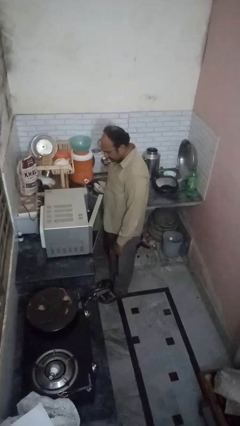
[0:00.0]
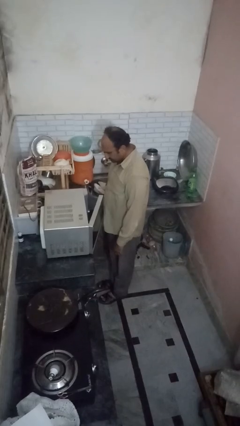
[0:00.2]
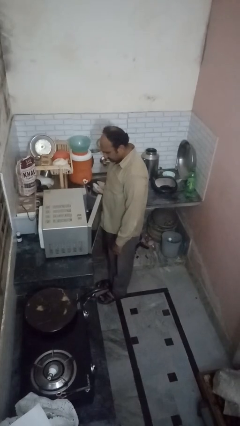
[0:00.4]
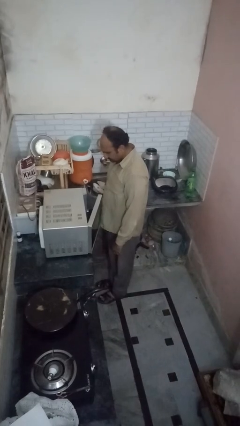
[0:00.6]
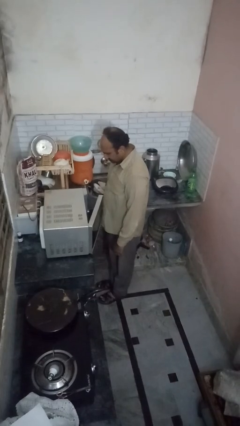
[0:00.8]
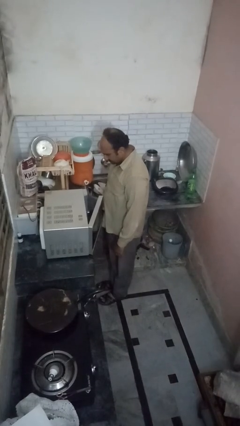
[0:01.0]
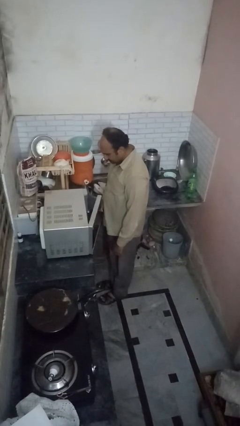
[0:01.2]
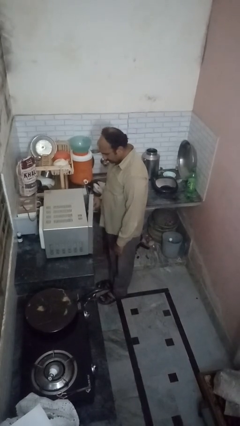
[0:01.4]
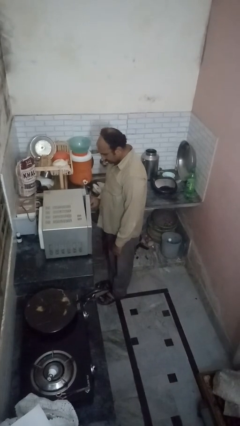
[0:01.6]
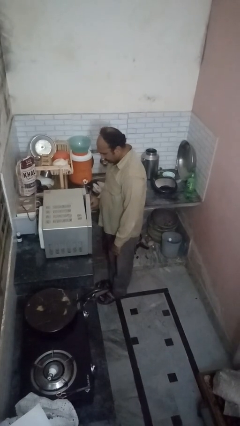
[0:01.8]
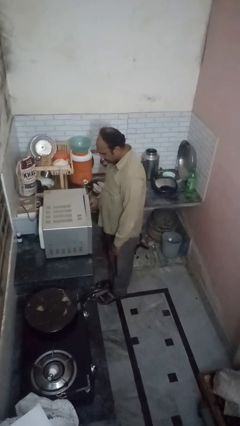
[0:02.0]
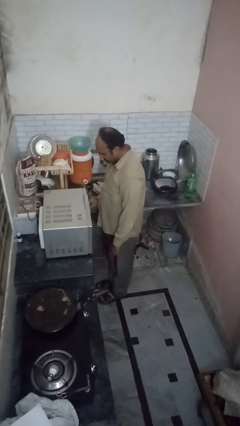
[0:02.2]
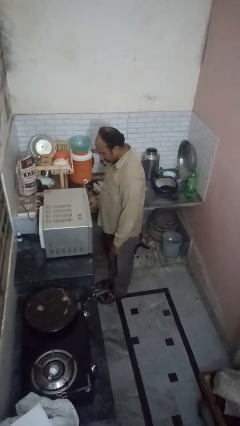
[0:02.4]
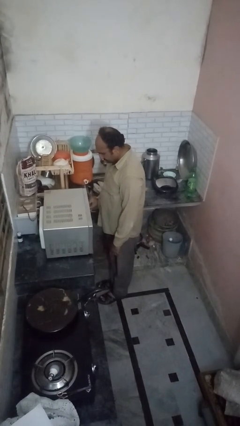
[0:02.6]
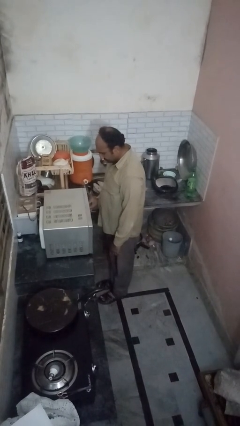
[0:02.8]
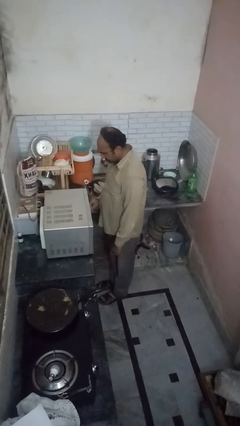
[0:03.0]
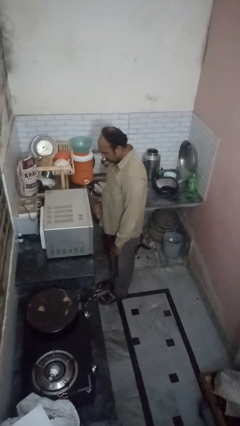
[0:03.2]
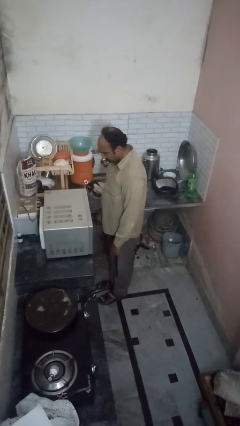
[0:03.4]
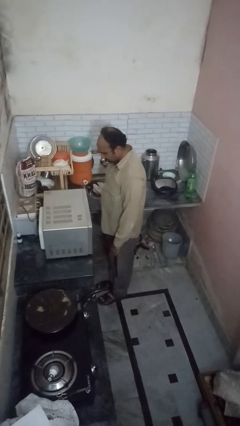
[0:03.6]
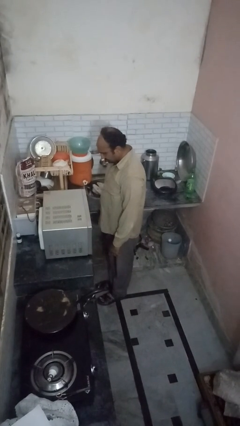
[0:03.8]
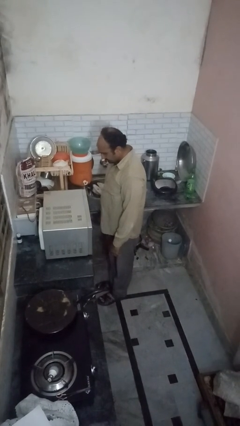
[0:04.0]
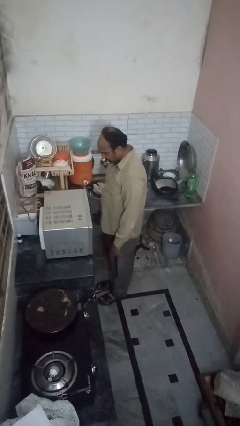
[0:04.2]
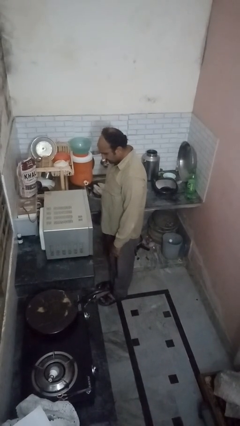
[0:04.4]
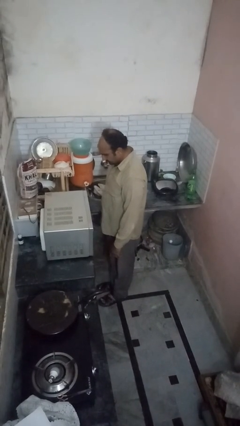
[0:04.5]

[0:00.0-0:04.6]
person closes oven door

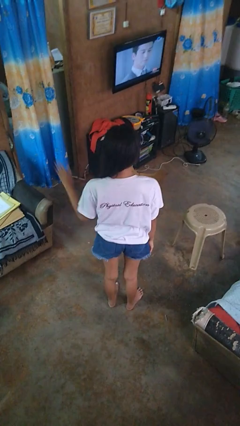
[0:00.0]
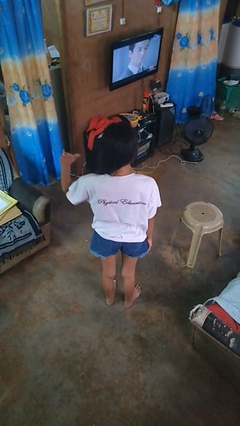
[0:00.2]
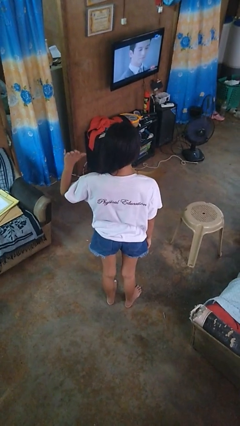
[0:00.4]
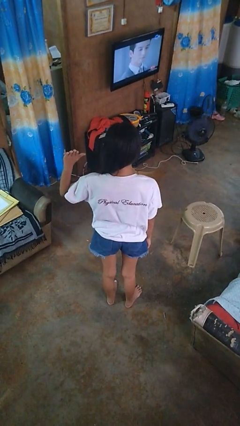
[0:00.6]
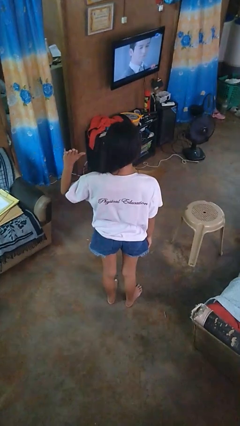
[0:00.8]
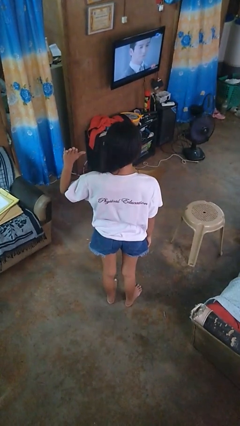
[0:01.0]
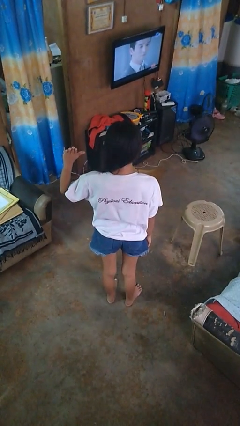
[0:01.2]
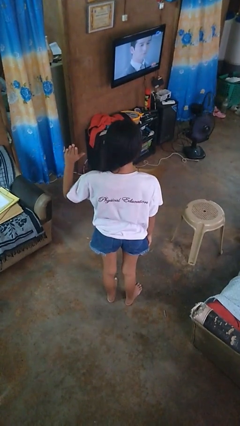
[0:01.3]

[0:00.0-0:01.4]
person gestures number five

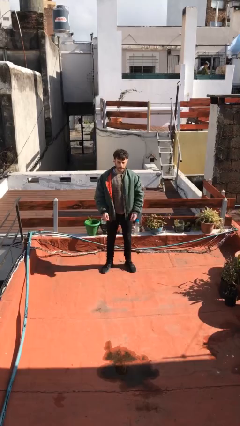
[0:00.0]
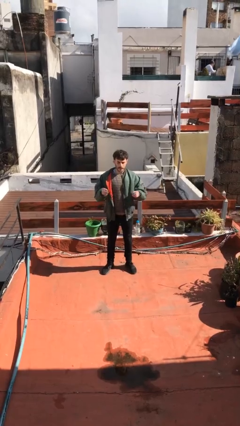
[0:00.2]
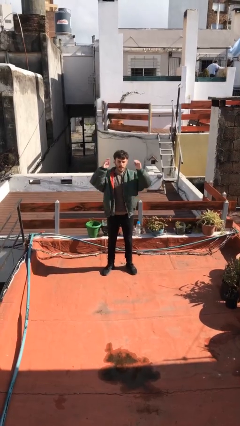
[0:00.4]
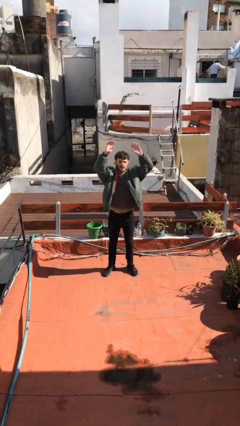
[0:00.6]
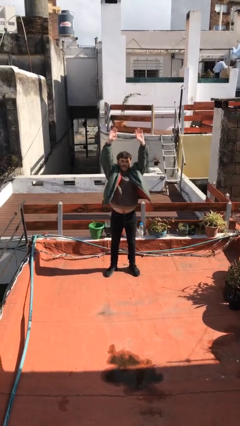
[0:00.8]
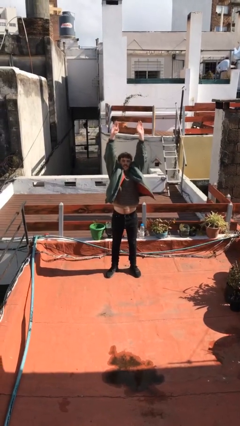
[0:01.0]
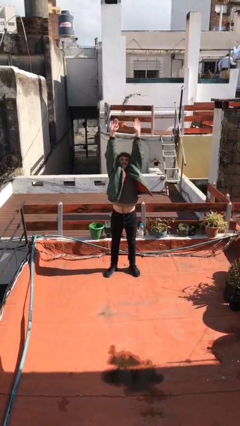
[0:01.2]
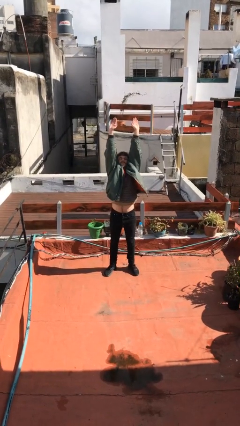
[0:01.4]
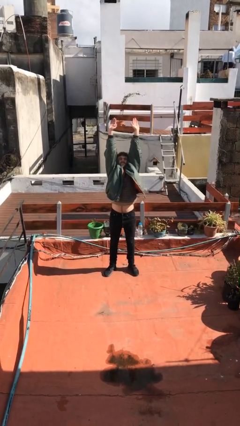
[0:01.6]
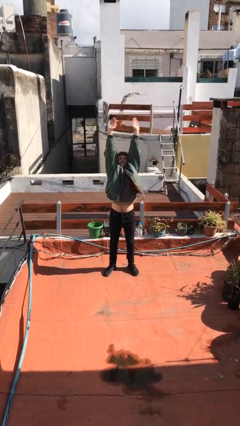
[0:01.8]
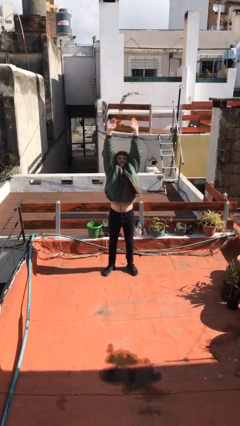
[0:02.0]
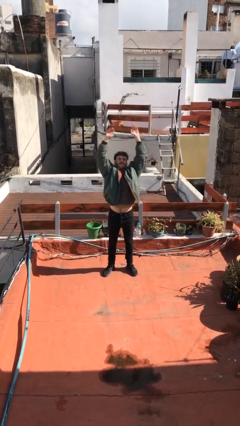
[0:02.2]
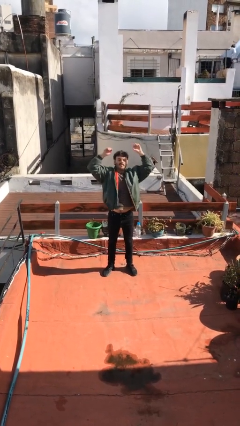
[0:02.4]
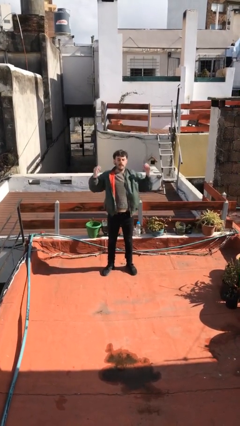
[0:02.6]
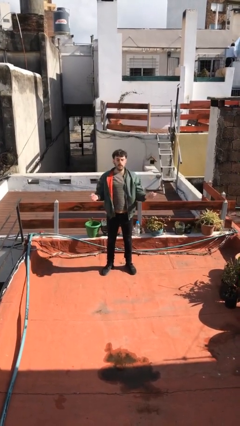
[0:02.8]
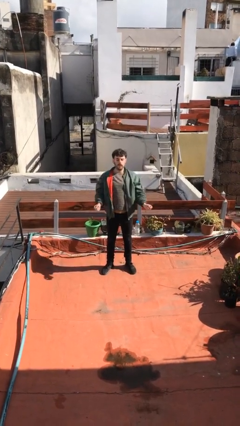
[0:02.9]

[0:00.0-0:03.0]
person stretches arms over head

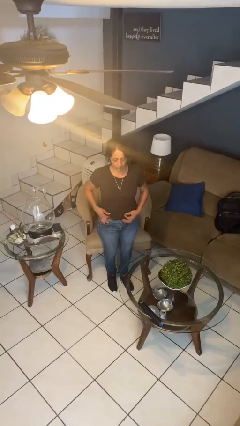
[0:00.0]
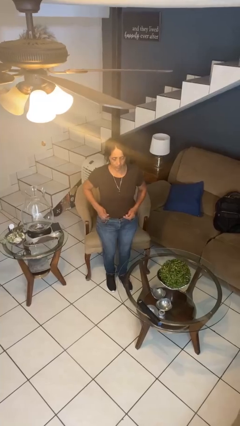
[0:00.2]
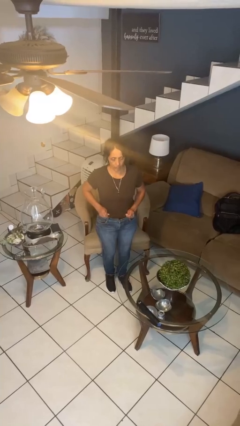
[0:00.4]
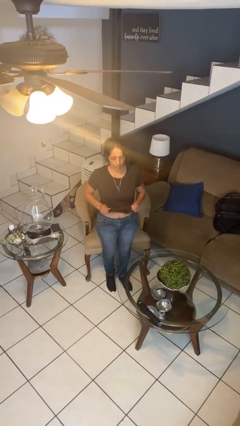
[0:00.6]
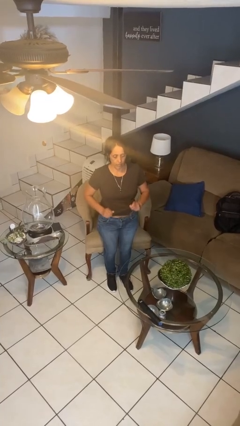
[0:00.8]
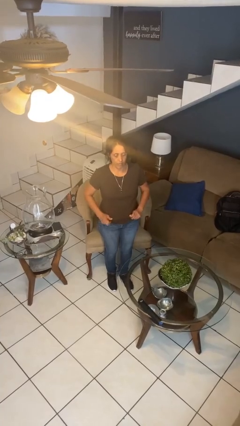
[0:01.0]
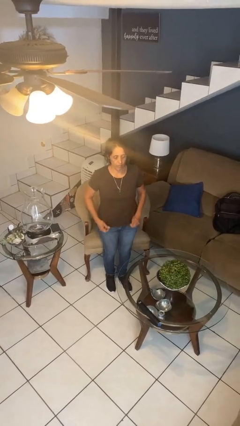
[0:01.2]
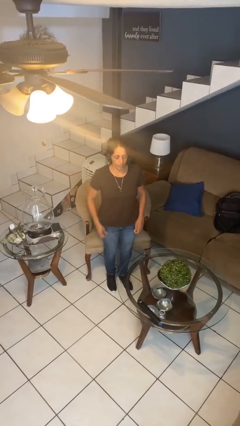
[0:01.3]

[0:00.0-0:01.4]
person untucks shirt

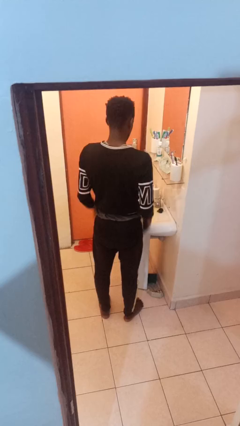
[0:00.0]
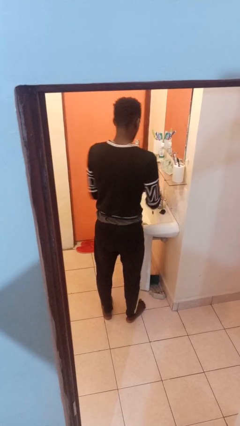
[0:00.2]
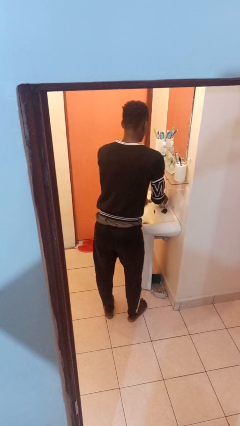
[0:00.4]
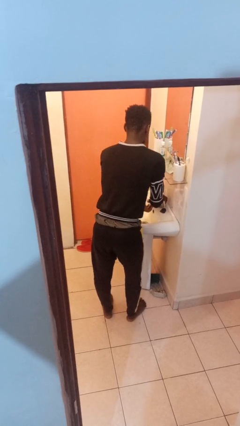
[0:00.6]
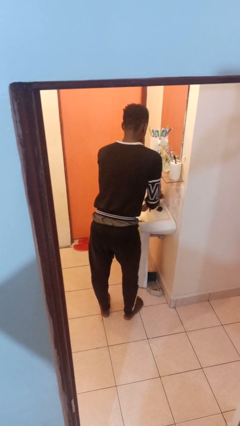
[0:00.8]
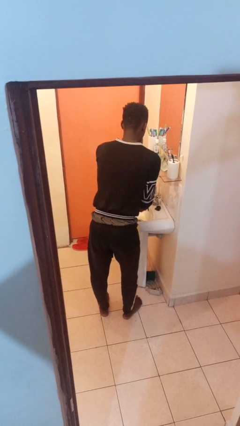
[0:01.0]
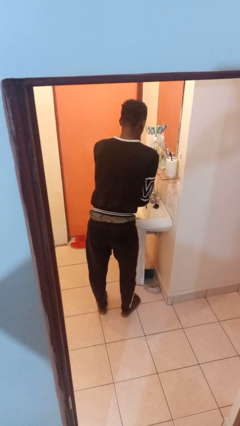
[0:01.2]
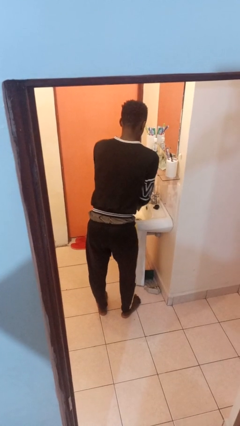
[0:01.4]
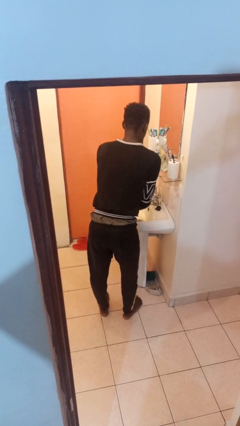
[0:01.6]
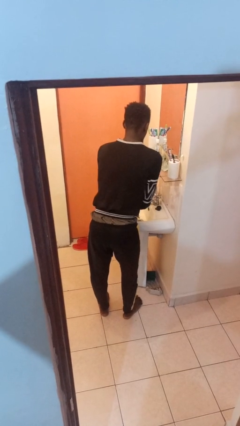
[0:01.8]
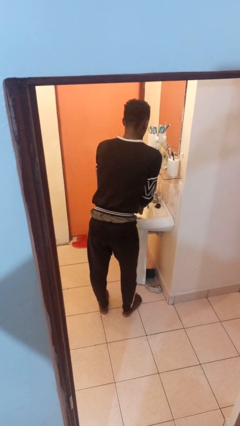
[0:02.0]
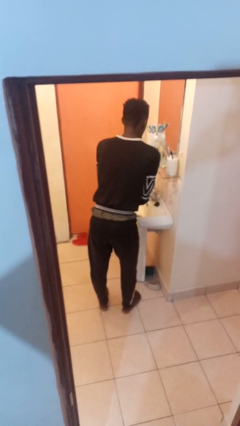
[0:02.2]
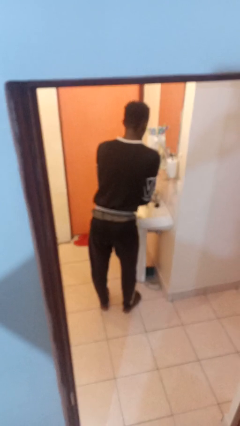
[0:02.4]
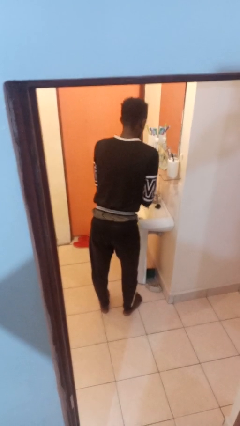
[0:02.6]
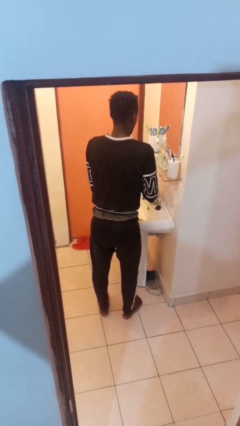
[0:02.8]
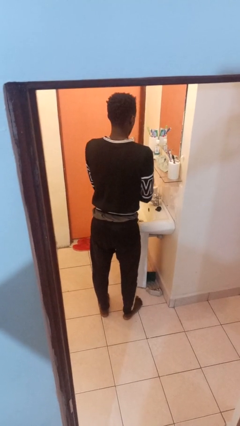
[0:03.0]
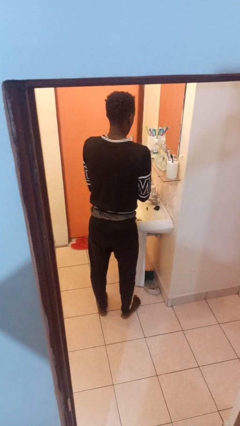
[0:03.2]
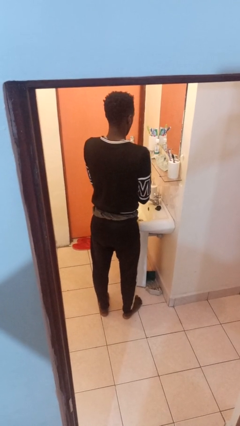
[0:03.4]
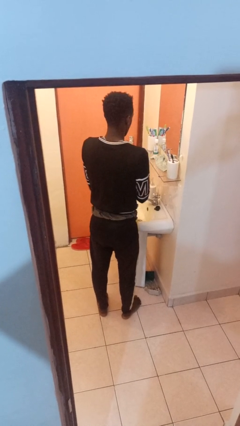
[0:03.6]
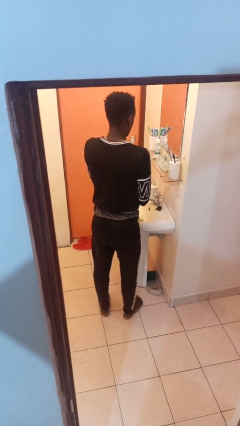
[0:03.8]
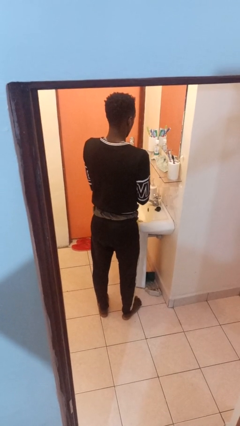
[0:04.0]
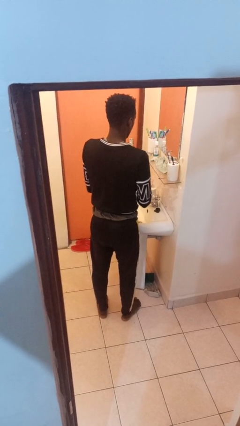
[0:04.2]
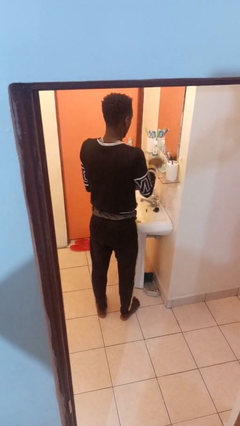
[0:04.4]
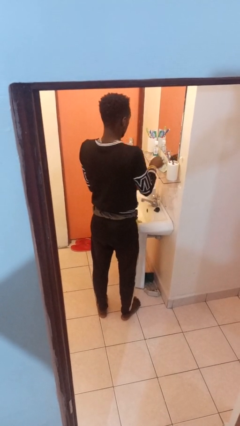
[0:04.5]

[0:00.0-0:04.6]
person washes hands

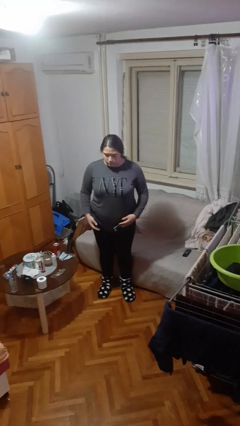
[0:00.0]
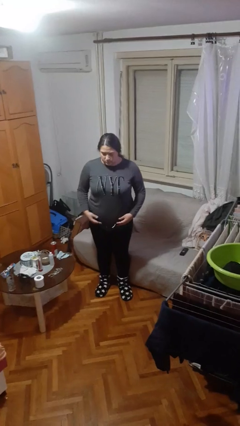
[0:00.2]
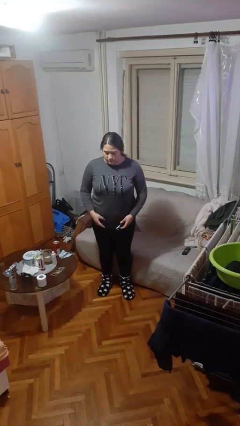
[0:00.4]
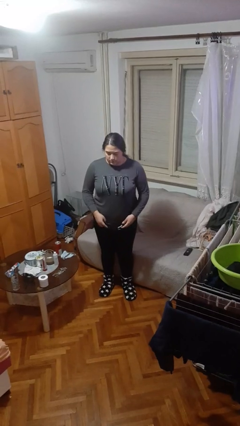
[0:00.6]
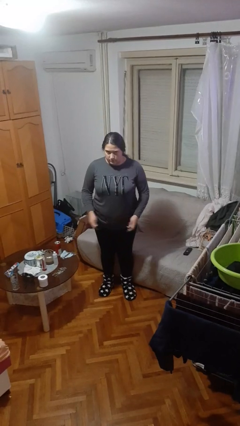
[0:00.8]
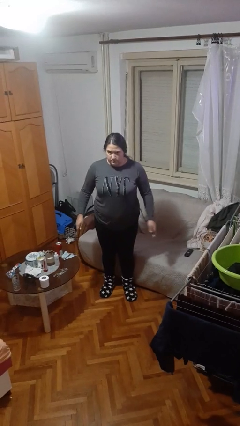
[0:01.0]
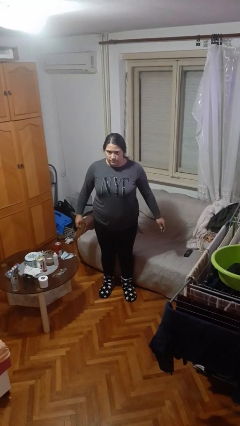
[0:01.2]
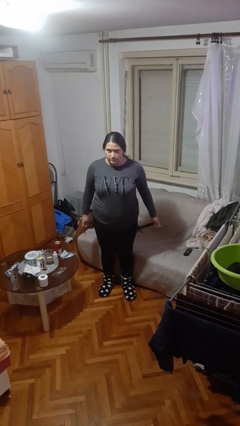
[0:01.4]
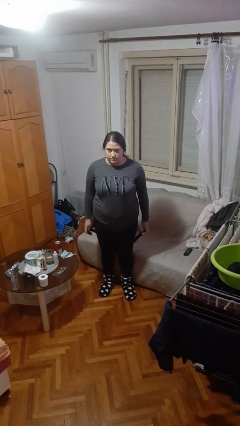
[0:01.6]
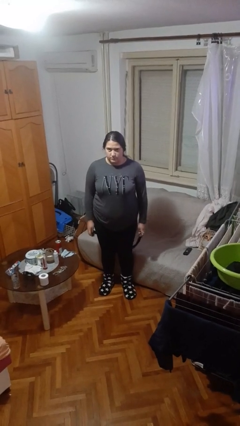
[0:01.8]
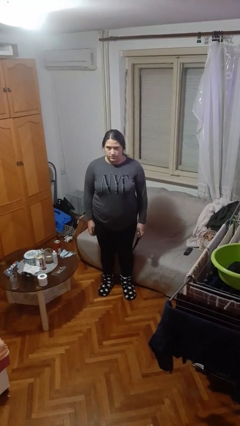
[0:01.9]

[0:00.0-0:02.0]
person takes off belt
